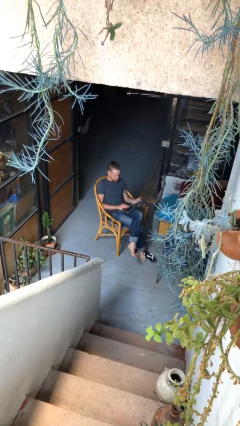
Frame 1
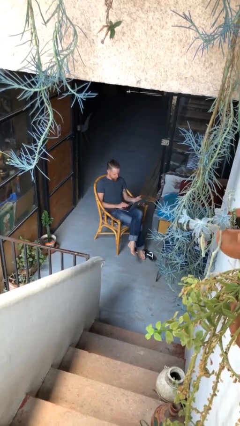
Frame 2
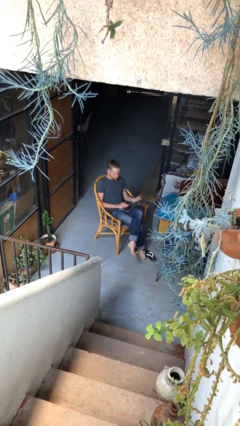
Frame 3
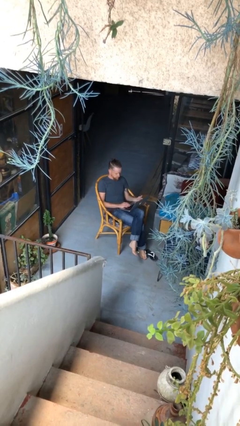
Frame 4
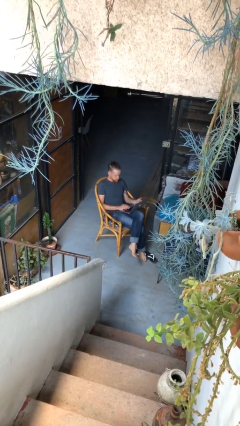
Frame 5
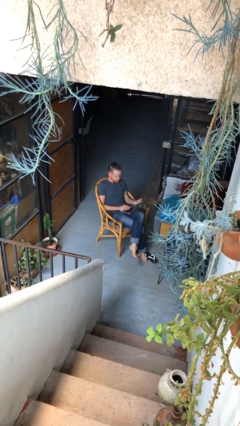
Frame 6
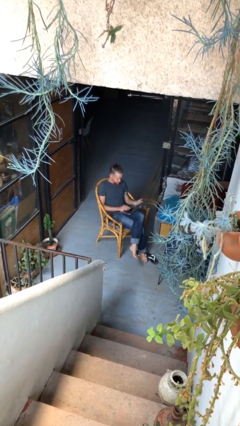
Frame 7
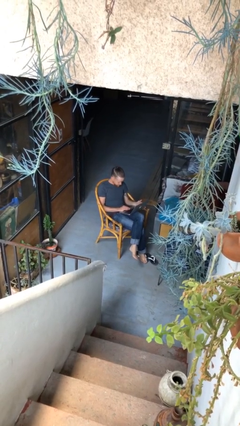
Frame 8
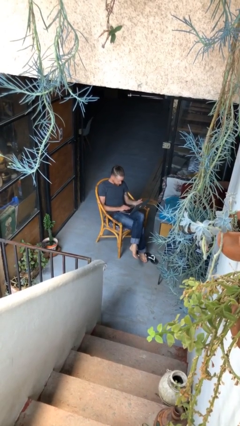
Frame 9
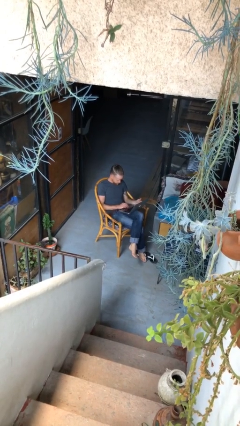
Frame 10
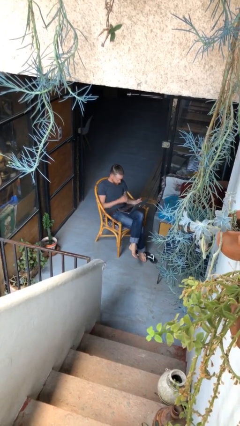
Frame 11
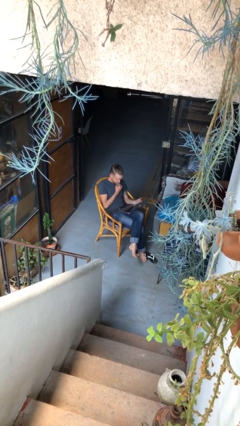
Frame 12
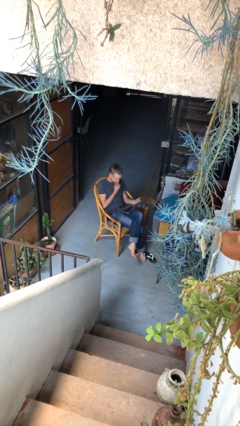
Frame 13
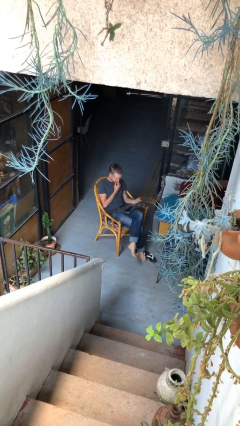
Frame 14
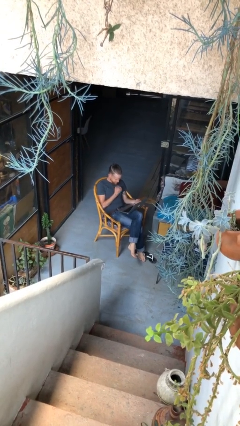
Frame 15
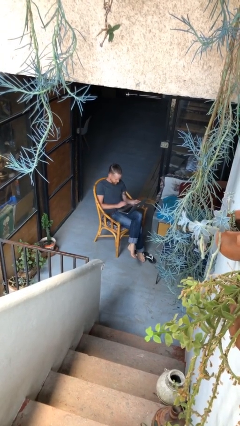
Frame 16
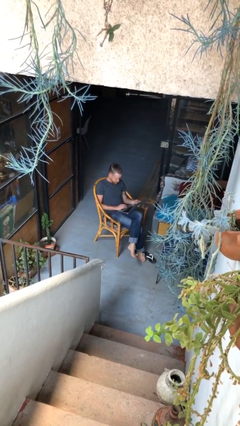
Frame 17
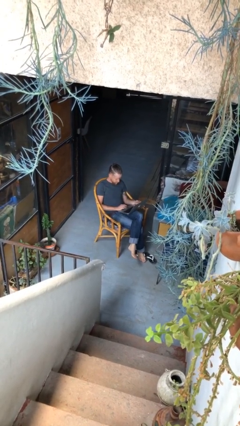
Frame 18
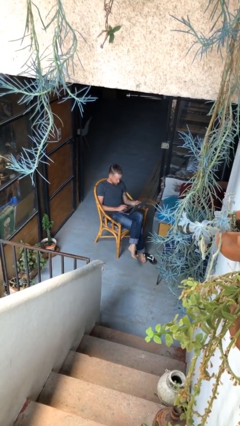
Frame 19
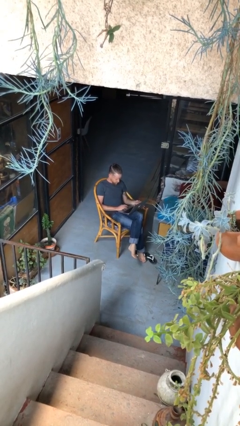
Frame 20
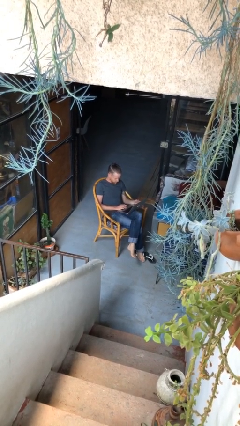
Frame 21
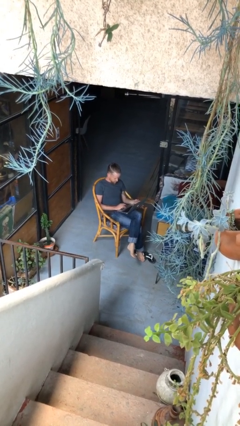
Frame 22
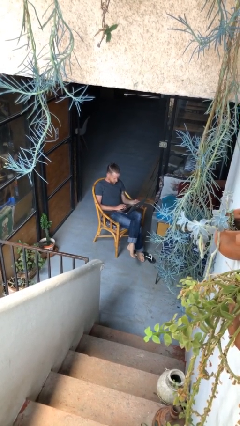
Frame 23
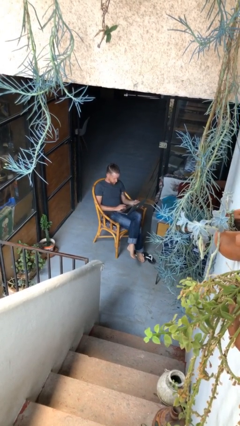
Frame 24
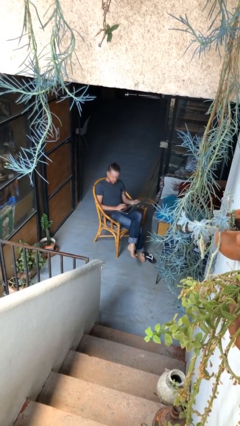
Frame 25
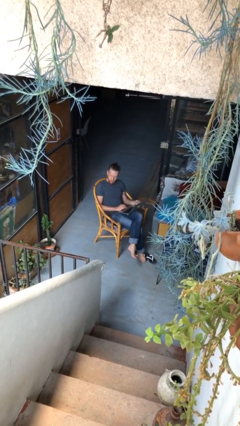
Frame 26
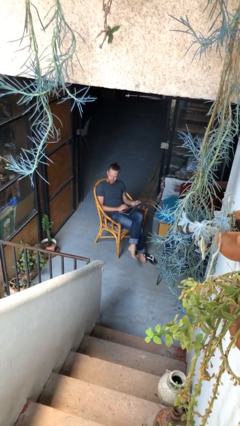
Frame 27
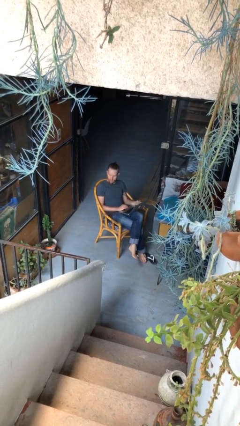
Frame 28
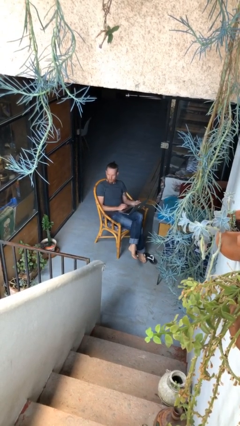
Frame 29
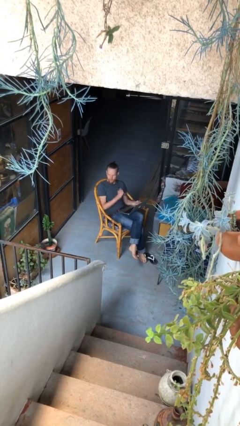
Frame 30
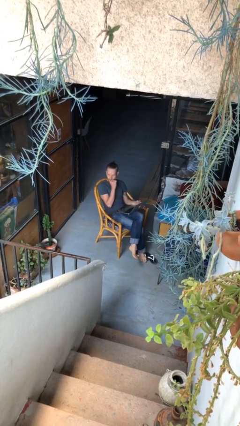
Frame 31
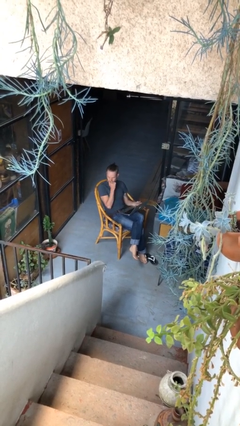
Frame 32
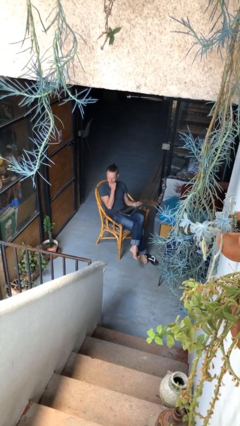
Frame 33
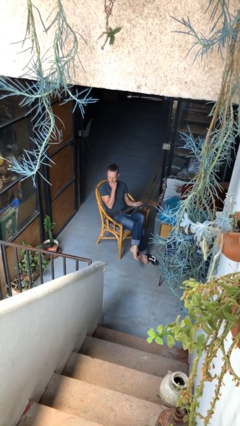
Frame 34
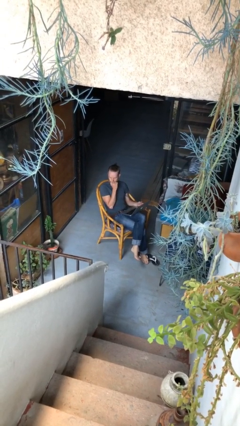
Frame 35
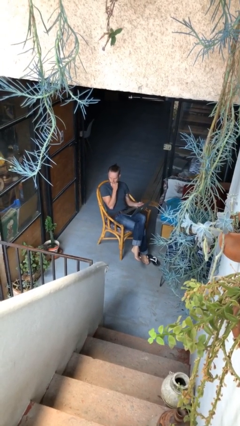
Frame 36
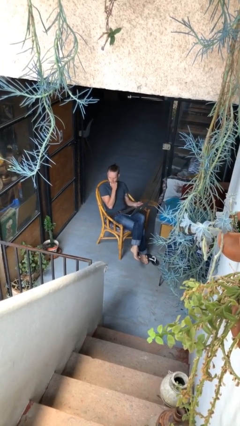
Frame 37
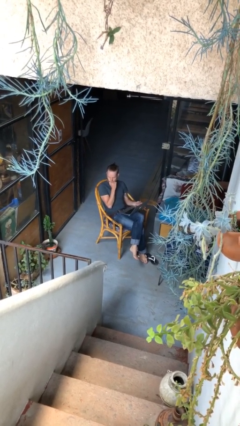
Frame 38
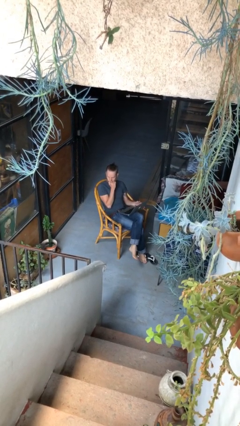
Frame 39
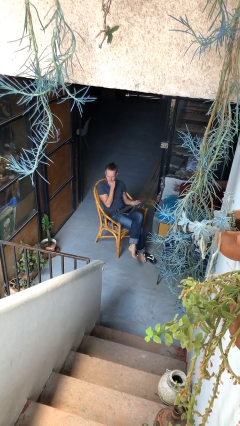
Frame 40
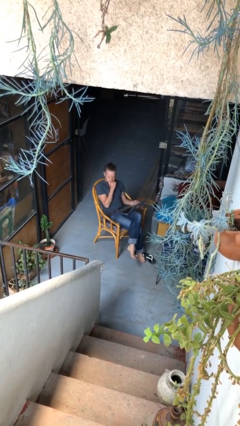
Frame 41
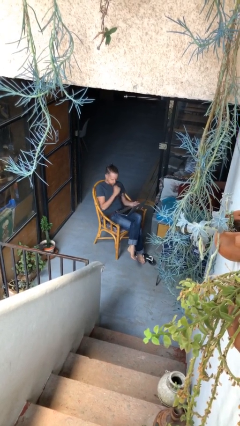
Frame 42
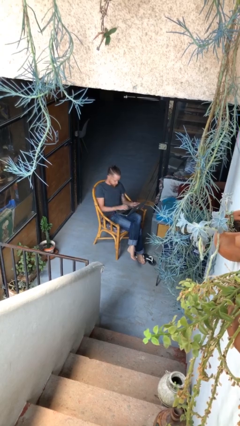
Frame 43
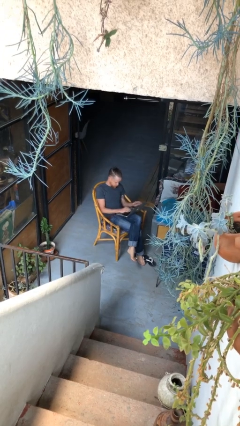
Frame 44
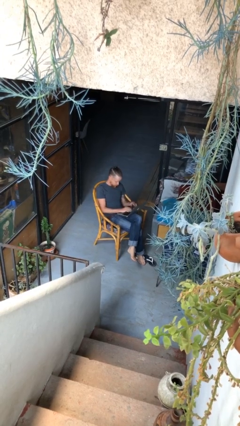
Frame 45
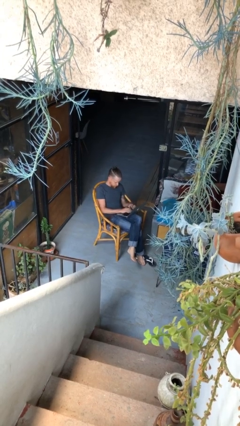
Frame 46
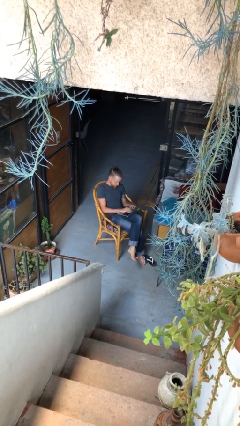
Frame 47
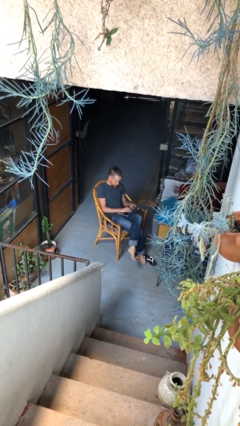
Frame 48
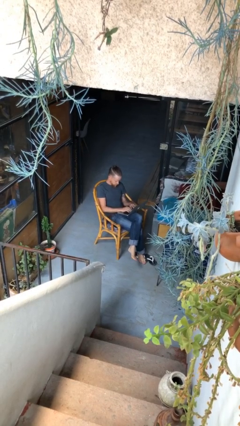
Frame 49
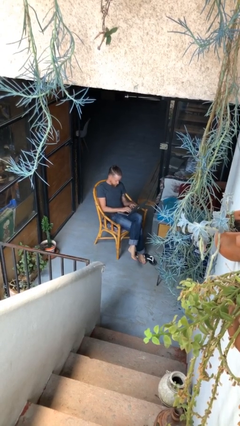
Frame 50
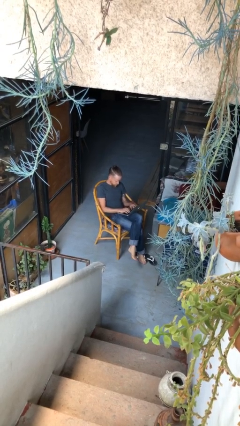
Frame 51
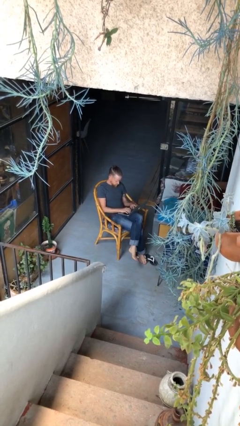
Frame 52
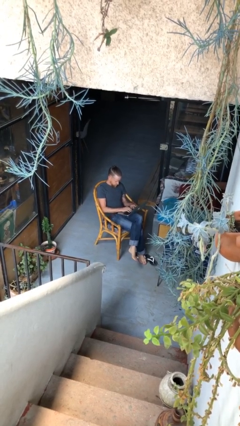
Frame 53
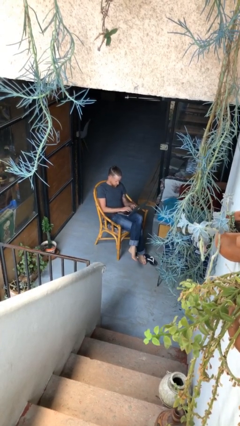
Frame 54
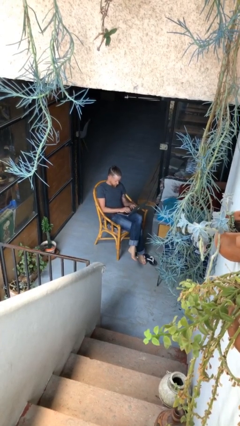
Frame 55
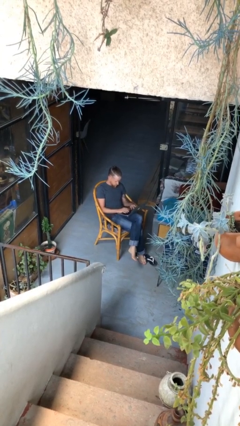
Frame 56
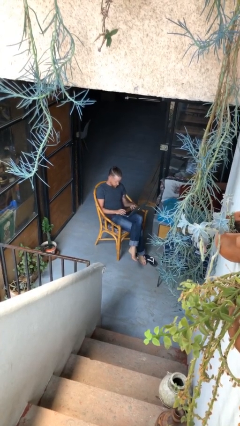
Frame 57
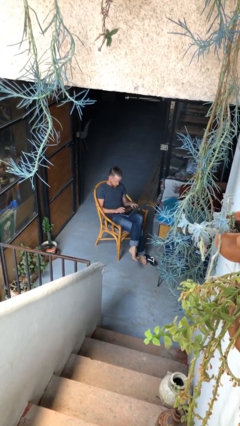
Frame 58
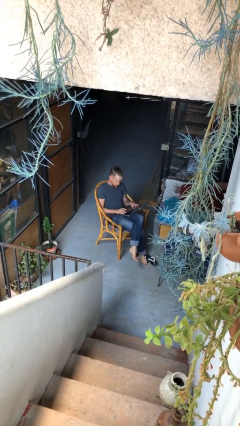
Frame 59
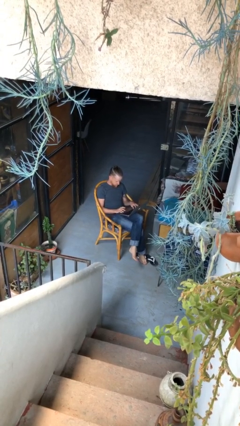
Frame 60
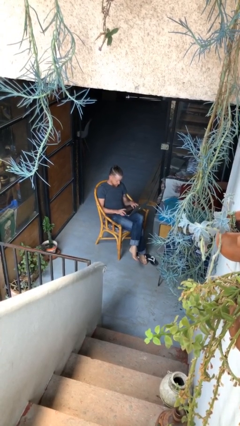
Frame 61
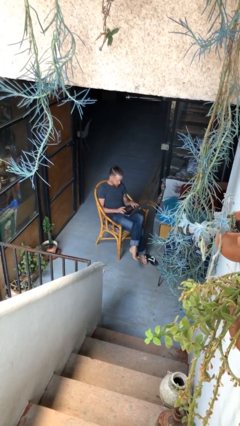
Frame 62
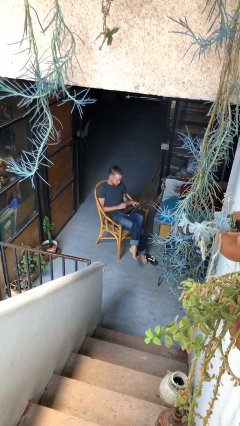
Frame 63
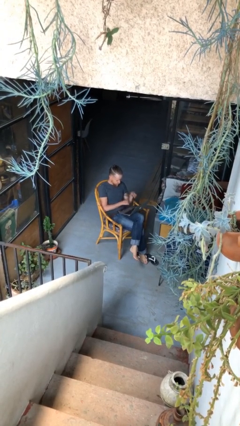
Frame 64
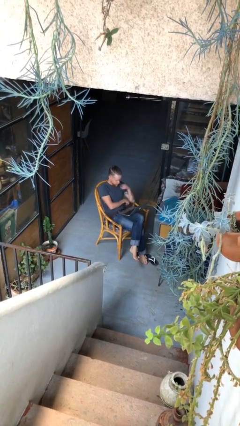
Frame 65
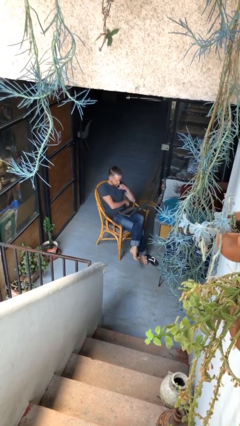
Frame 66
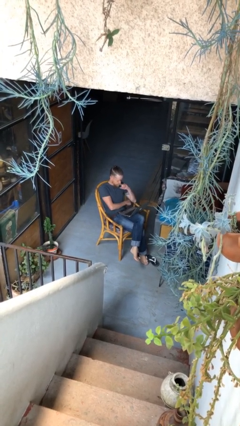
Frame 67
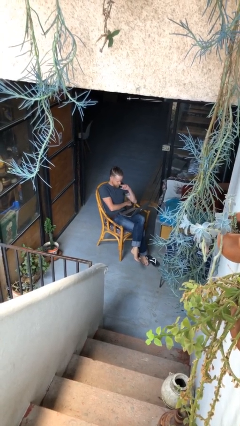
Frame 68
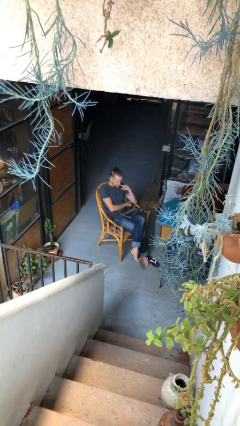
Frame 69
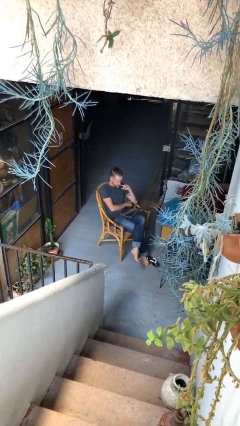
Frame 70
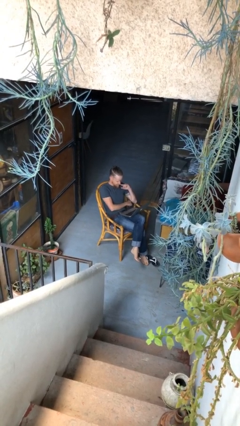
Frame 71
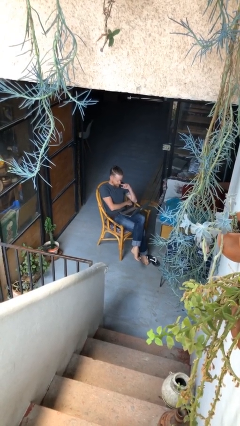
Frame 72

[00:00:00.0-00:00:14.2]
person interacts with laptop

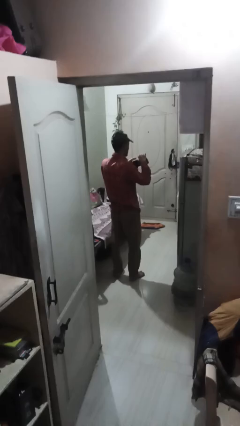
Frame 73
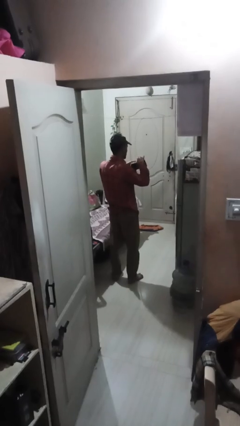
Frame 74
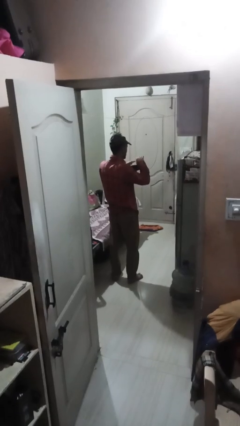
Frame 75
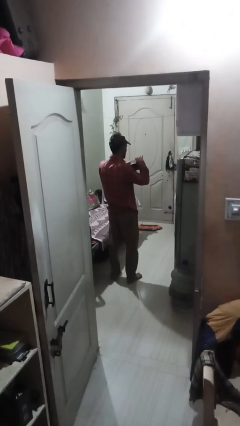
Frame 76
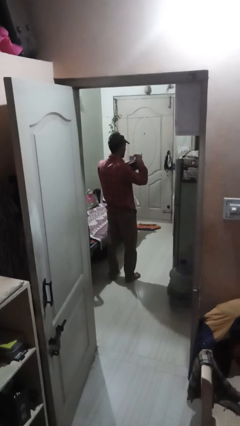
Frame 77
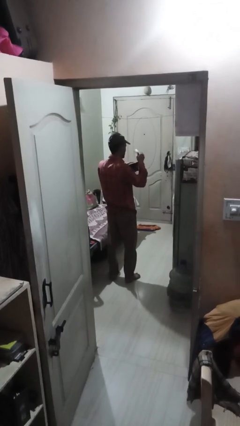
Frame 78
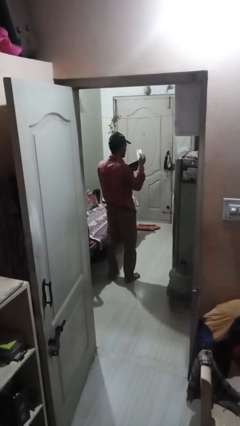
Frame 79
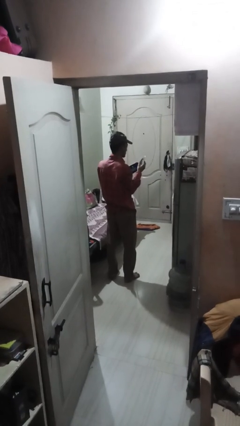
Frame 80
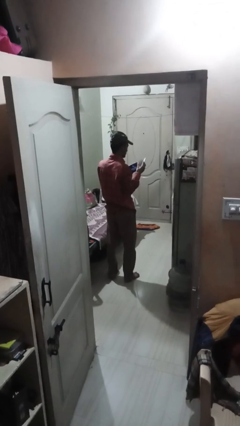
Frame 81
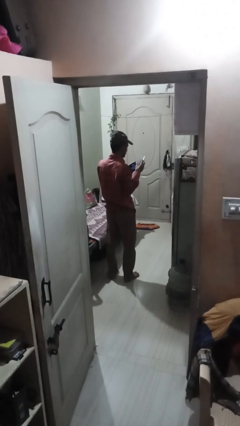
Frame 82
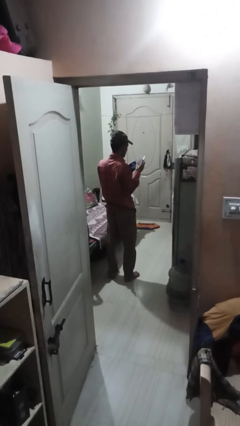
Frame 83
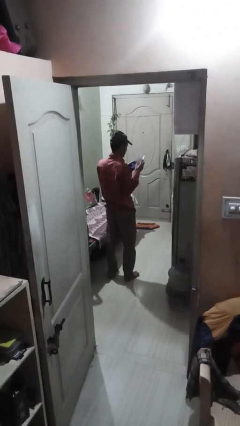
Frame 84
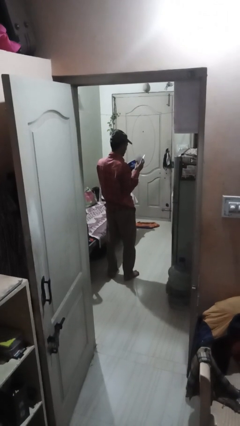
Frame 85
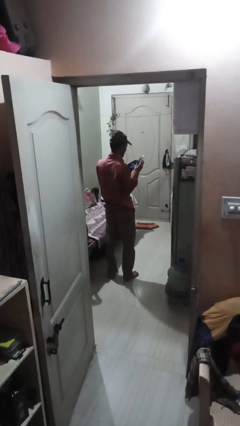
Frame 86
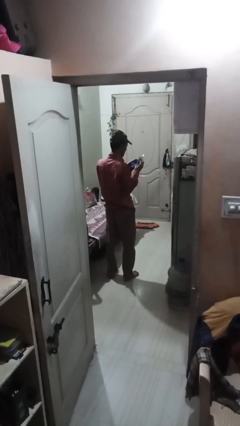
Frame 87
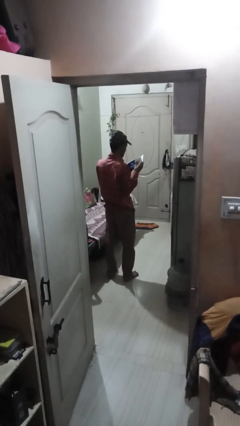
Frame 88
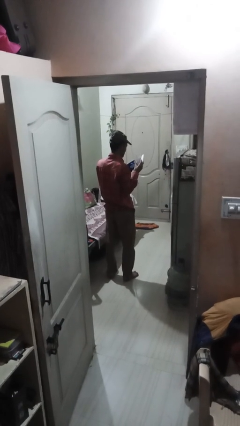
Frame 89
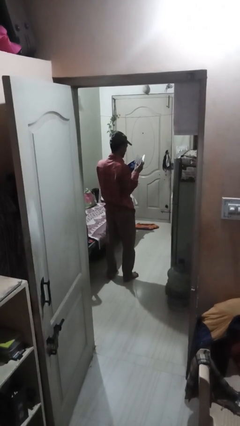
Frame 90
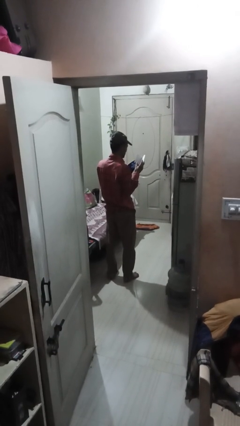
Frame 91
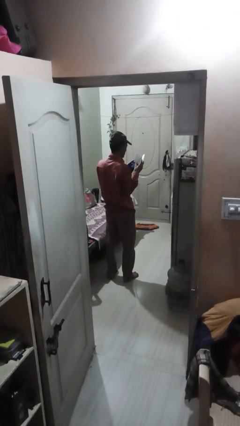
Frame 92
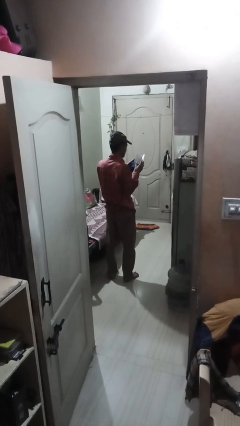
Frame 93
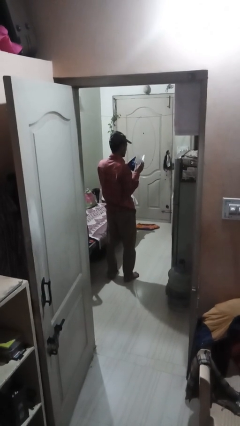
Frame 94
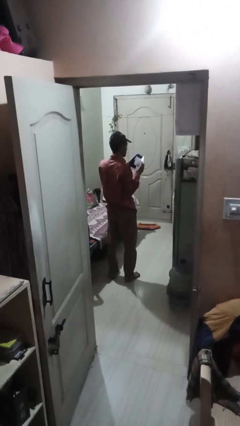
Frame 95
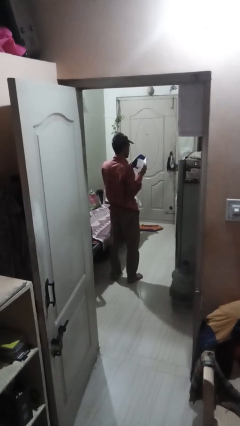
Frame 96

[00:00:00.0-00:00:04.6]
person takes object from purse

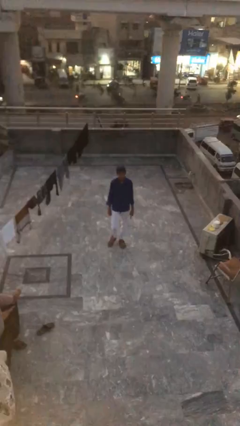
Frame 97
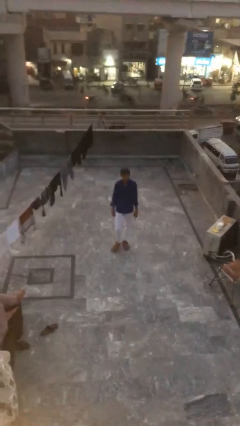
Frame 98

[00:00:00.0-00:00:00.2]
person texts on phone
